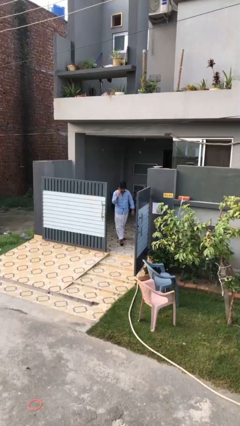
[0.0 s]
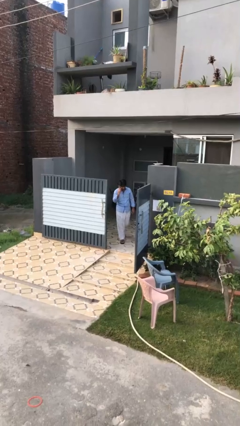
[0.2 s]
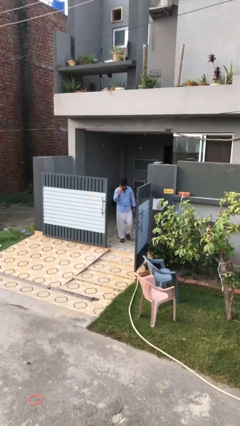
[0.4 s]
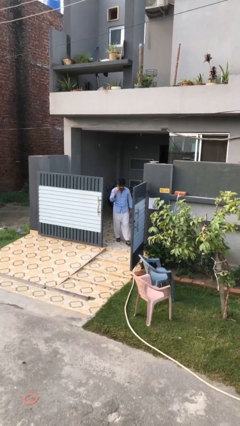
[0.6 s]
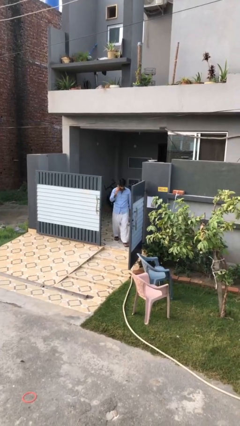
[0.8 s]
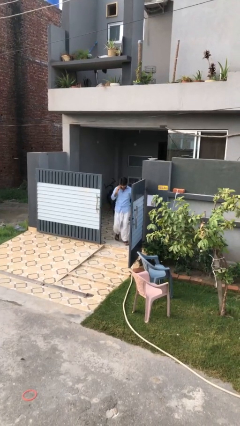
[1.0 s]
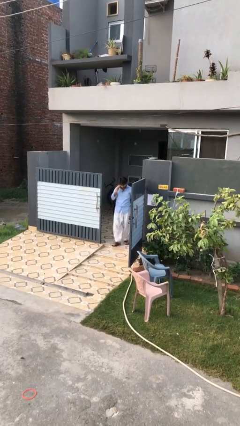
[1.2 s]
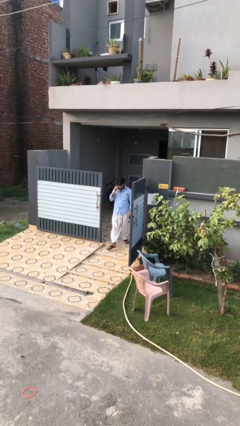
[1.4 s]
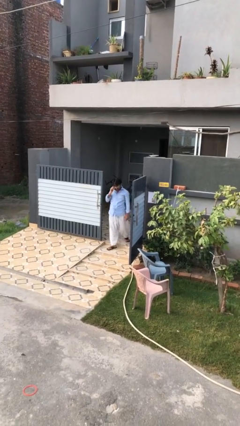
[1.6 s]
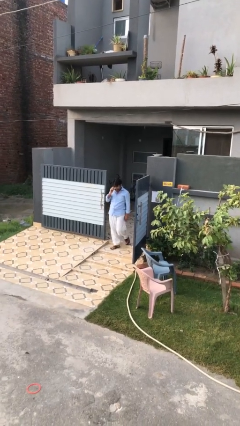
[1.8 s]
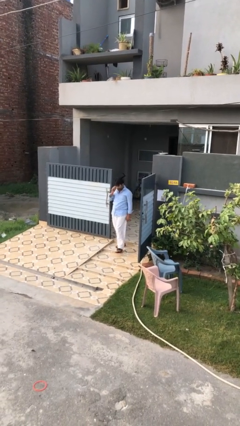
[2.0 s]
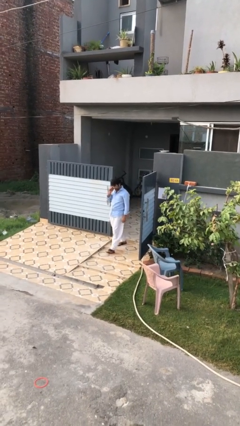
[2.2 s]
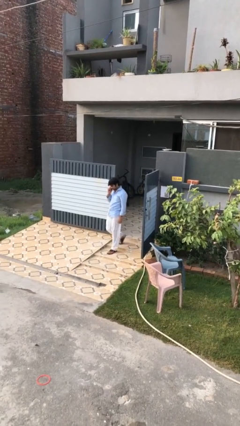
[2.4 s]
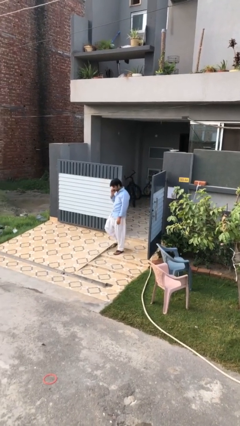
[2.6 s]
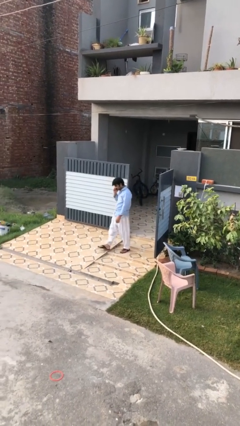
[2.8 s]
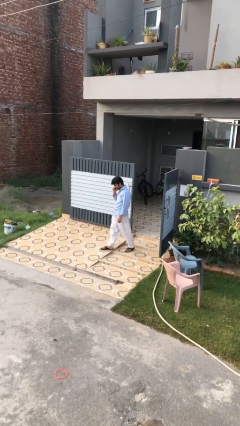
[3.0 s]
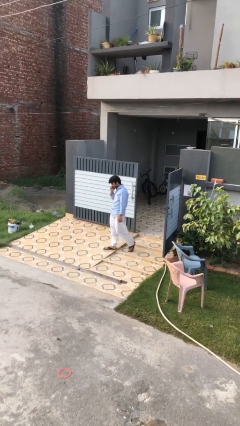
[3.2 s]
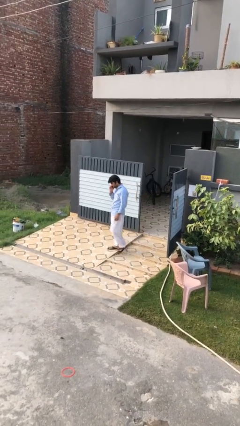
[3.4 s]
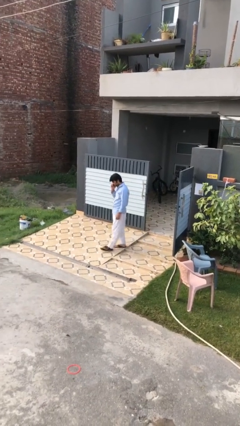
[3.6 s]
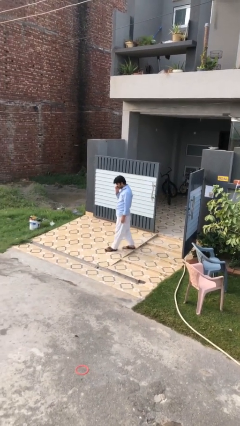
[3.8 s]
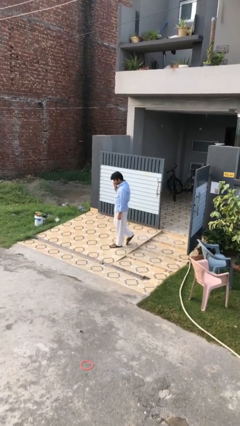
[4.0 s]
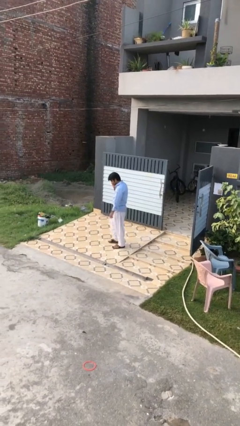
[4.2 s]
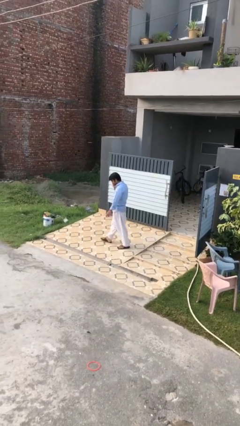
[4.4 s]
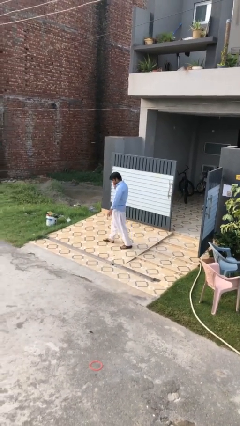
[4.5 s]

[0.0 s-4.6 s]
person enters scene through structure

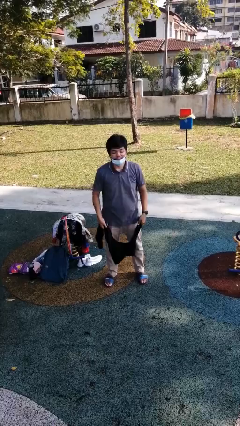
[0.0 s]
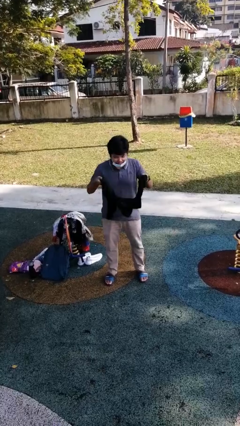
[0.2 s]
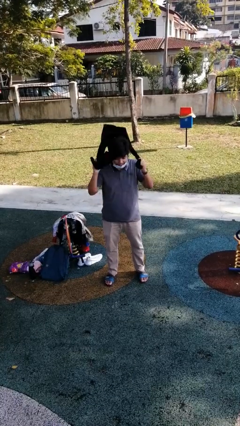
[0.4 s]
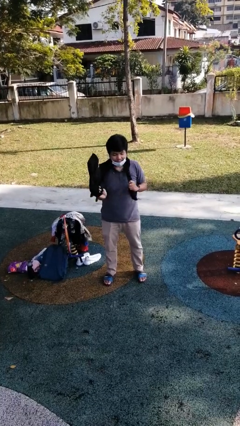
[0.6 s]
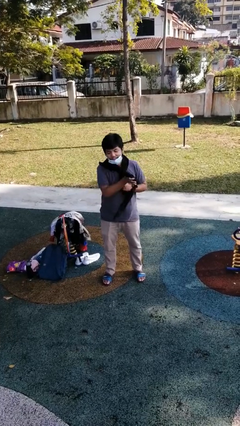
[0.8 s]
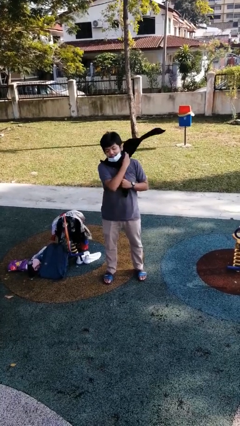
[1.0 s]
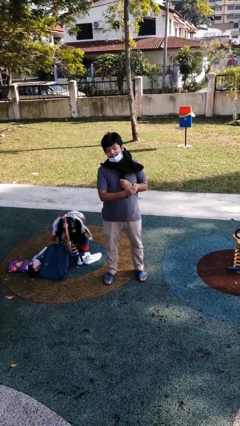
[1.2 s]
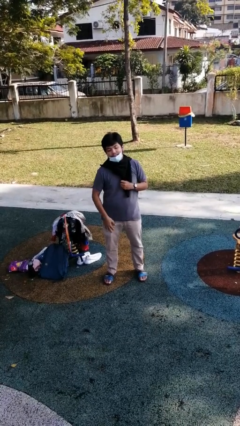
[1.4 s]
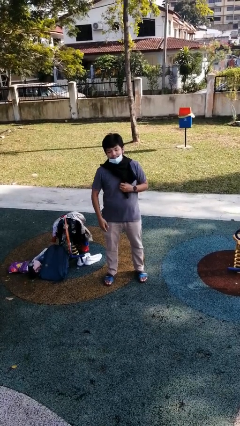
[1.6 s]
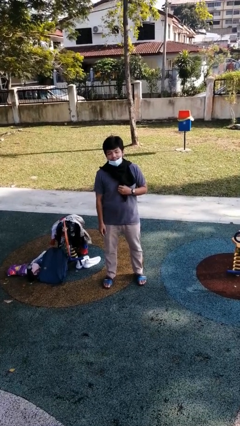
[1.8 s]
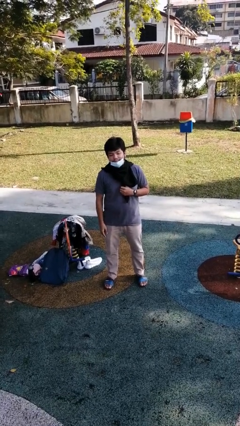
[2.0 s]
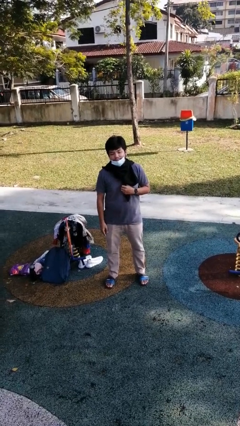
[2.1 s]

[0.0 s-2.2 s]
person puts on scarf

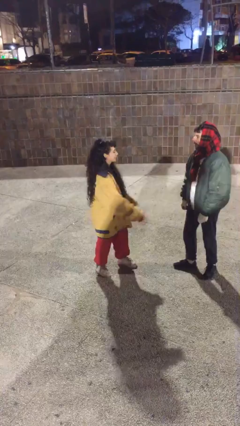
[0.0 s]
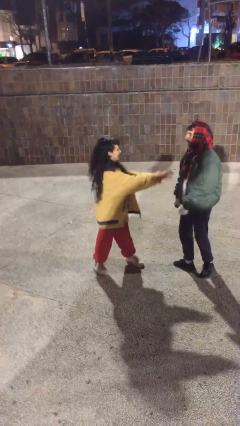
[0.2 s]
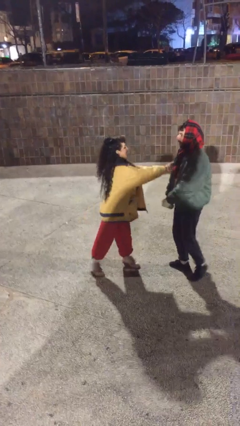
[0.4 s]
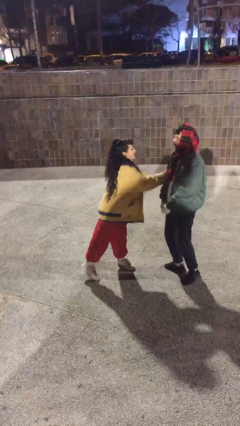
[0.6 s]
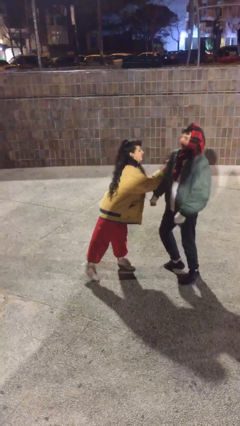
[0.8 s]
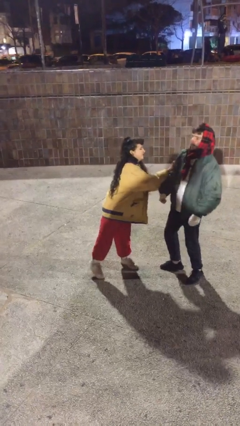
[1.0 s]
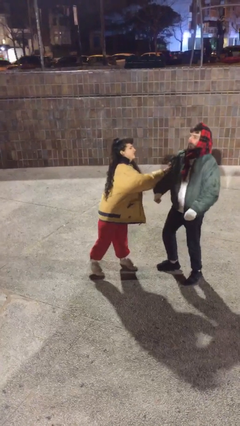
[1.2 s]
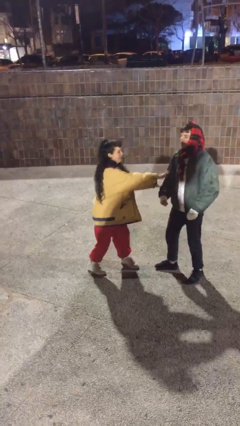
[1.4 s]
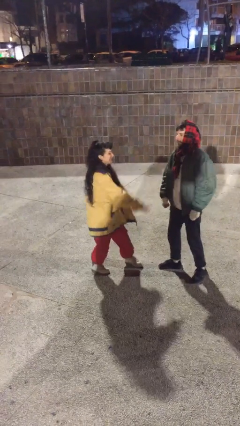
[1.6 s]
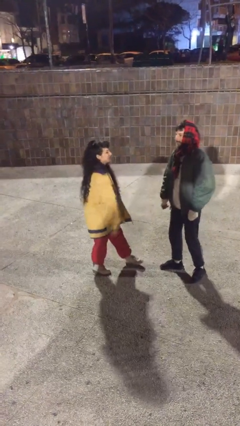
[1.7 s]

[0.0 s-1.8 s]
person grabs person by bicep

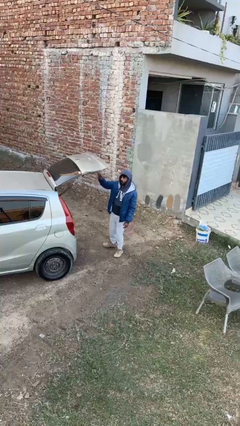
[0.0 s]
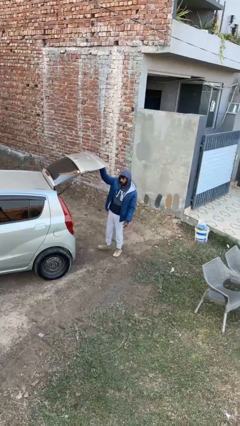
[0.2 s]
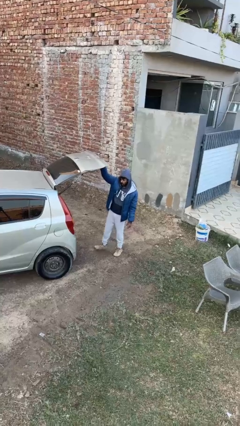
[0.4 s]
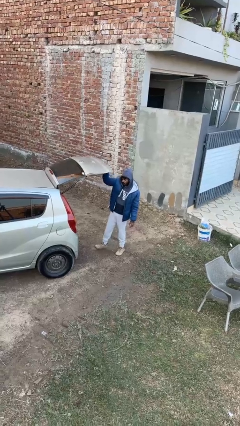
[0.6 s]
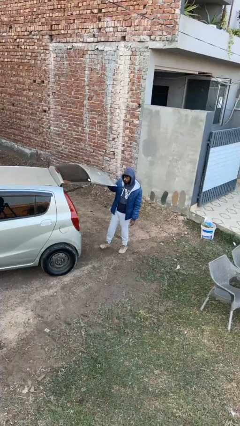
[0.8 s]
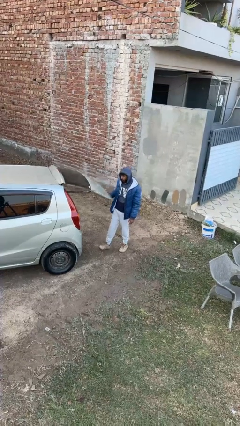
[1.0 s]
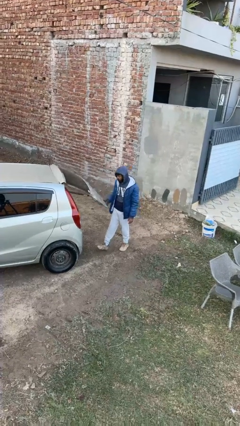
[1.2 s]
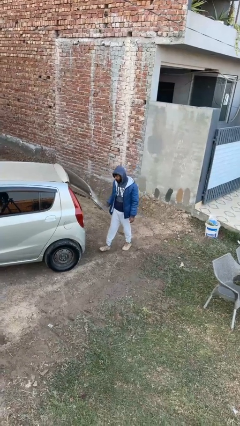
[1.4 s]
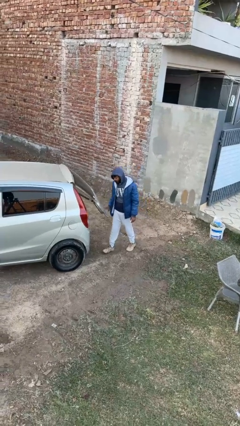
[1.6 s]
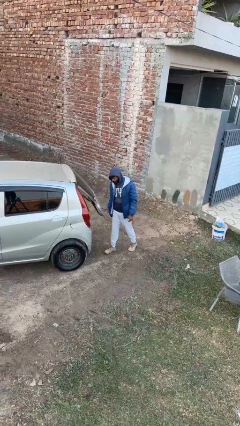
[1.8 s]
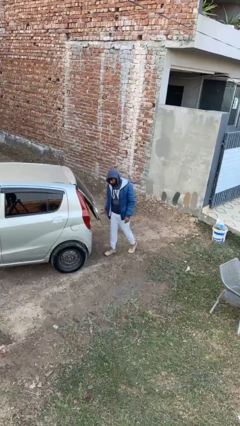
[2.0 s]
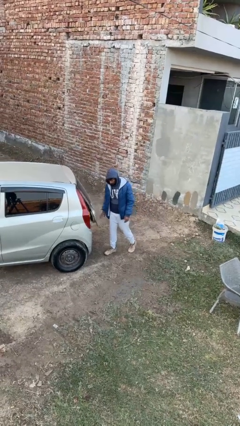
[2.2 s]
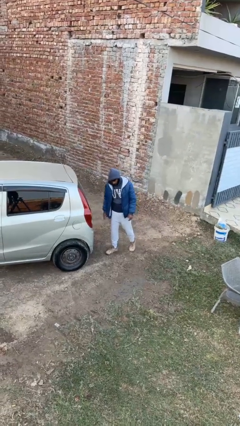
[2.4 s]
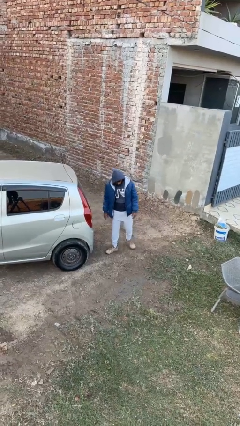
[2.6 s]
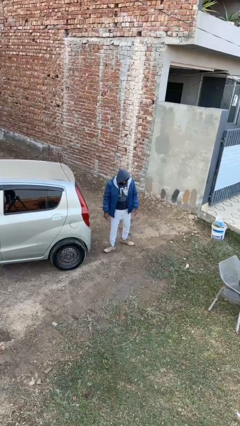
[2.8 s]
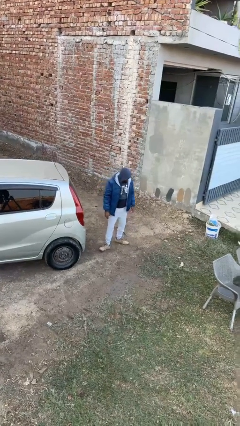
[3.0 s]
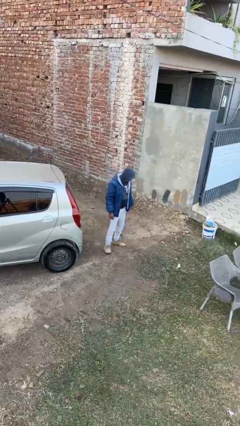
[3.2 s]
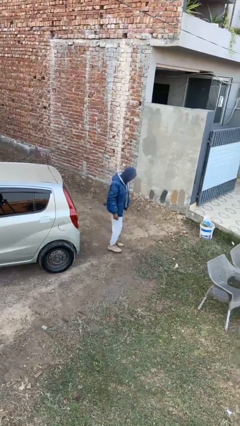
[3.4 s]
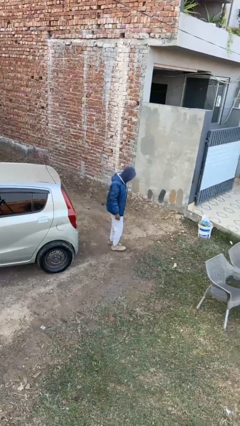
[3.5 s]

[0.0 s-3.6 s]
person closes car trunk

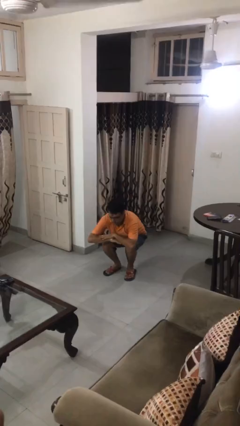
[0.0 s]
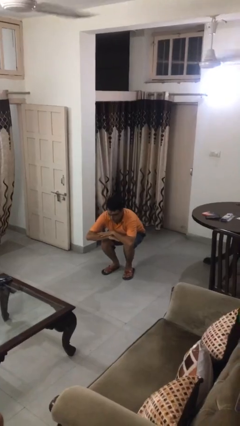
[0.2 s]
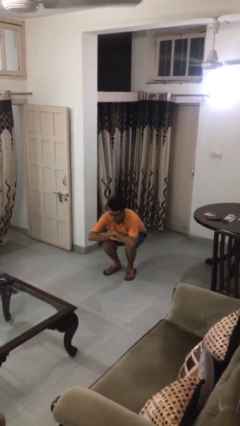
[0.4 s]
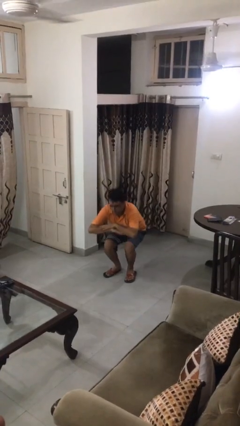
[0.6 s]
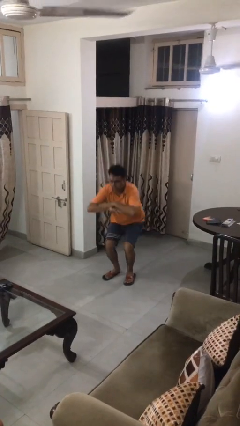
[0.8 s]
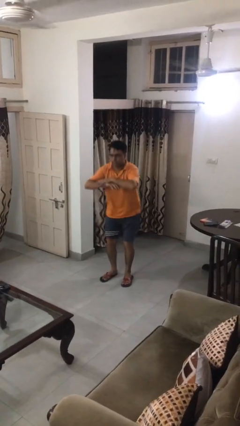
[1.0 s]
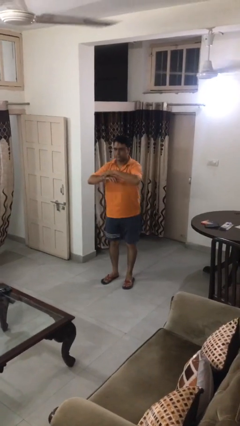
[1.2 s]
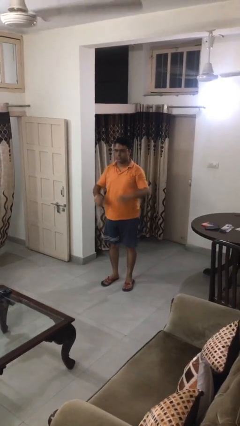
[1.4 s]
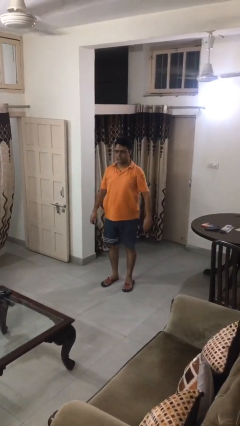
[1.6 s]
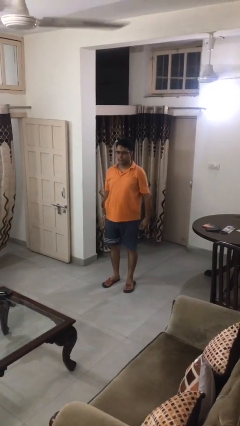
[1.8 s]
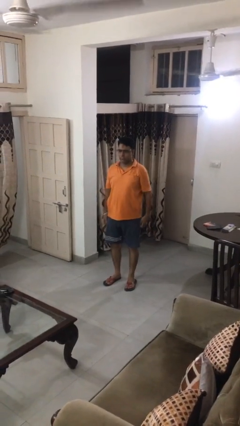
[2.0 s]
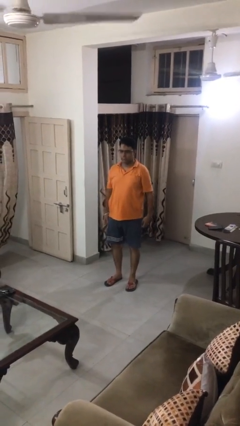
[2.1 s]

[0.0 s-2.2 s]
person stands up

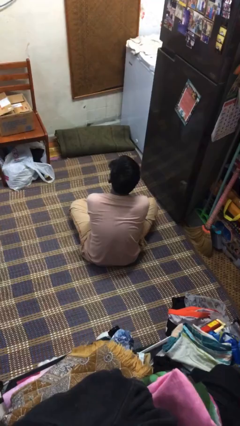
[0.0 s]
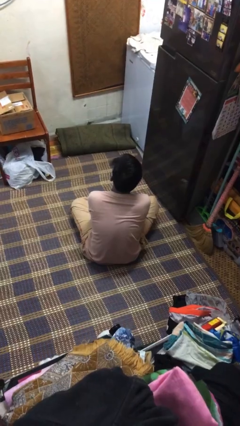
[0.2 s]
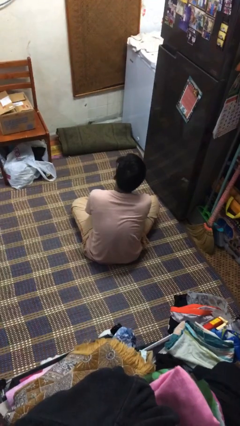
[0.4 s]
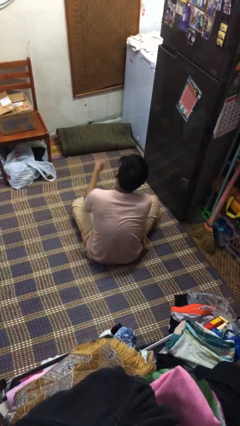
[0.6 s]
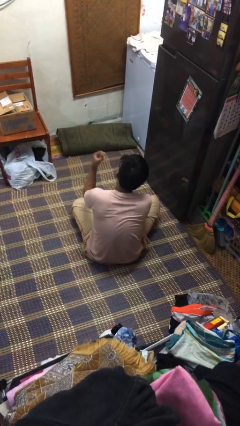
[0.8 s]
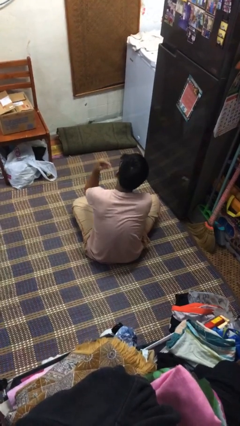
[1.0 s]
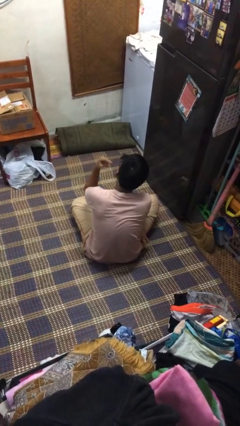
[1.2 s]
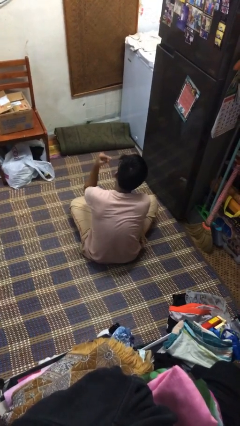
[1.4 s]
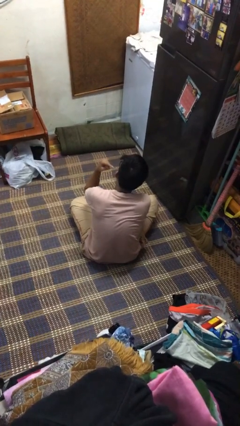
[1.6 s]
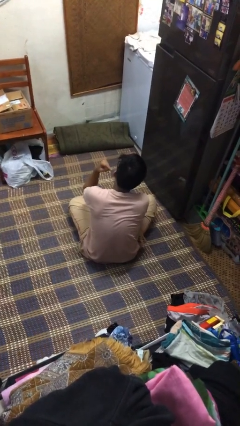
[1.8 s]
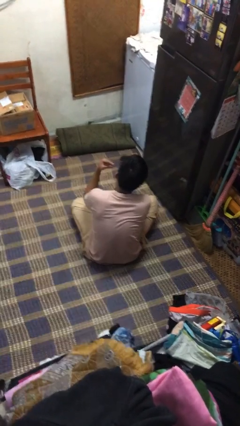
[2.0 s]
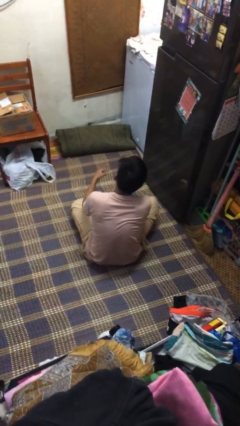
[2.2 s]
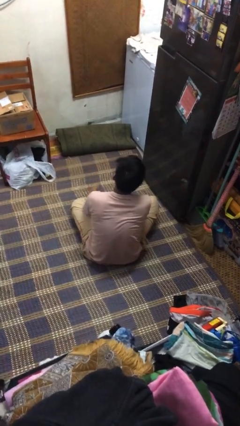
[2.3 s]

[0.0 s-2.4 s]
person gestures listen closely

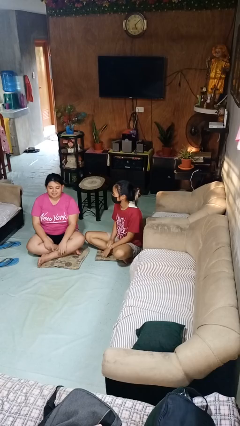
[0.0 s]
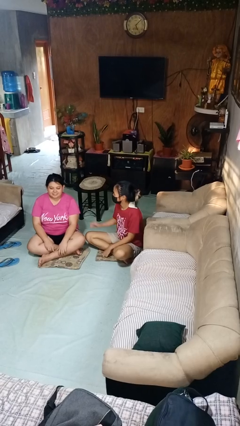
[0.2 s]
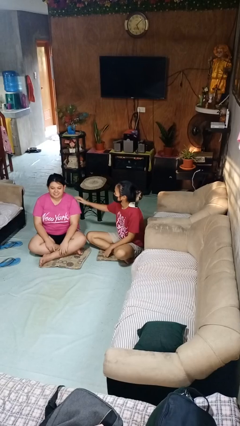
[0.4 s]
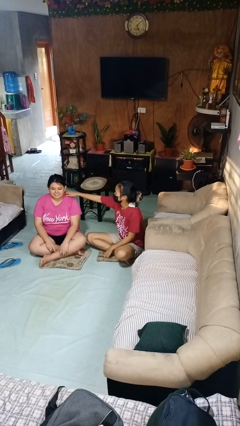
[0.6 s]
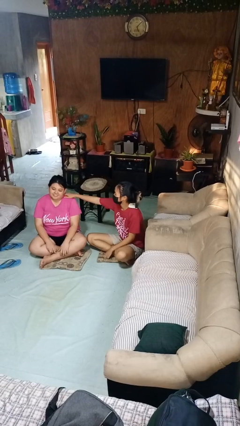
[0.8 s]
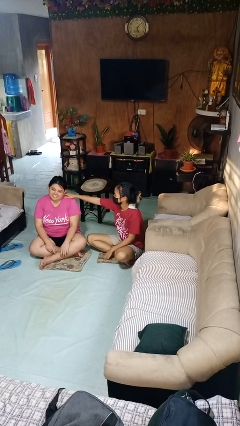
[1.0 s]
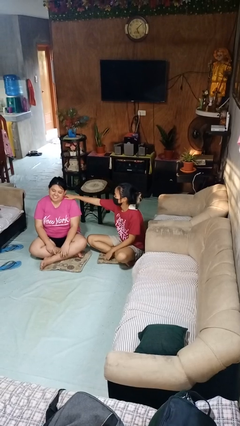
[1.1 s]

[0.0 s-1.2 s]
person tickles person
